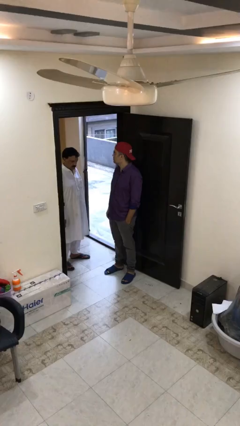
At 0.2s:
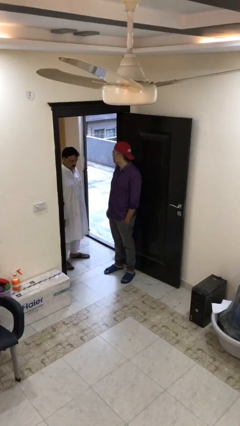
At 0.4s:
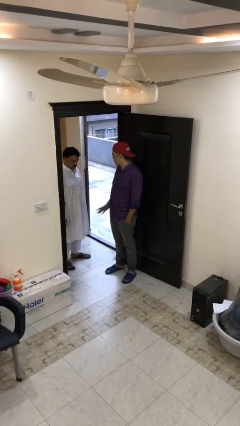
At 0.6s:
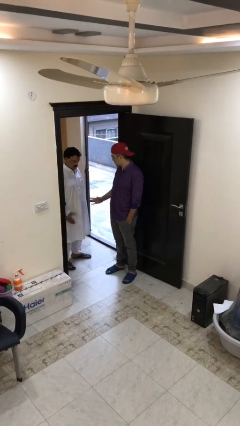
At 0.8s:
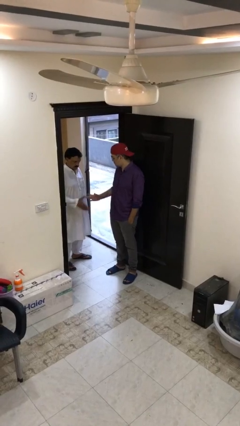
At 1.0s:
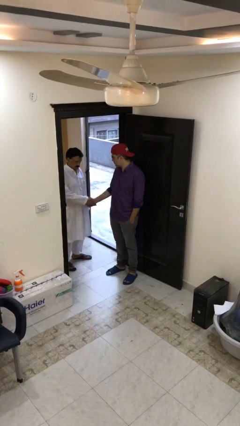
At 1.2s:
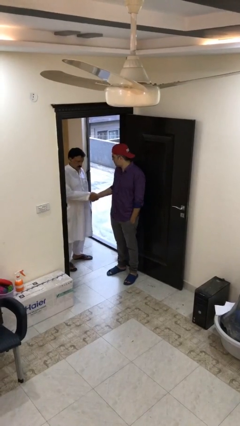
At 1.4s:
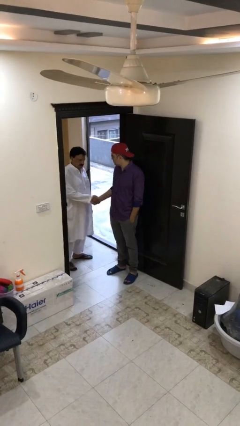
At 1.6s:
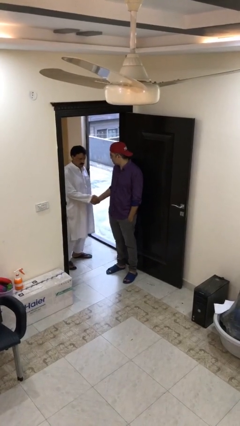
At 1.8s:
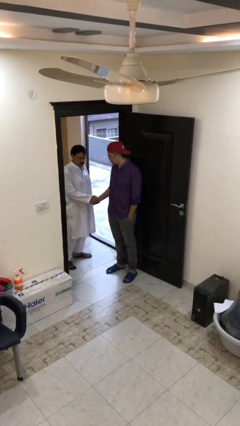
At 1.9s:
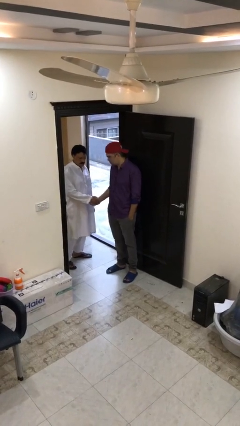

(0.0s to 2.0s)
person shakes hand

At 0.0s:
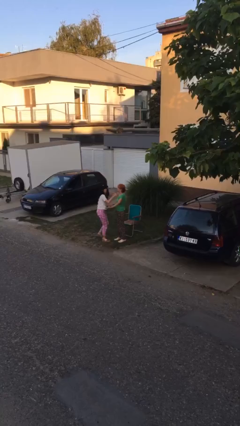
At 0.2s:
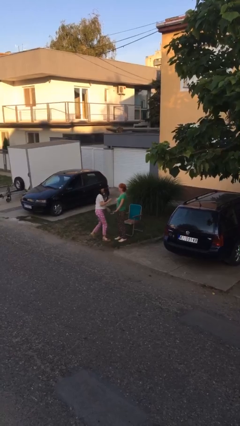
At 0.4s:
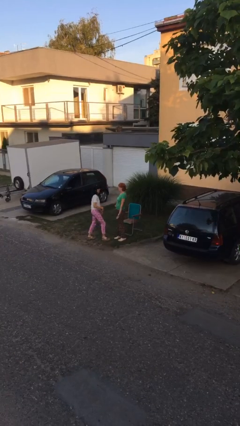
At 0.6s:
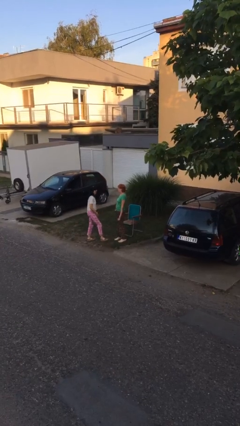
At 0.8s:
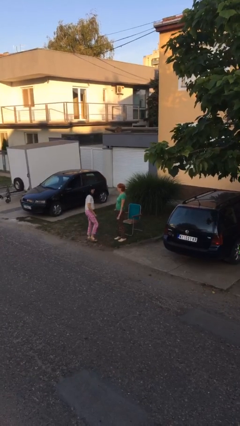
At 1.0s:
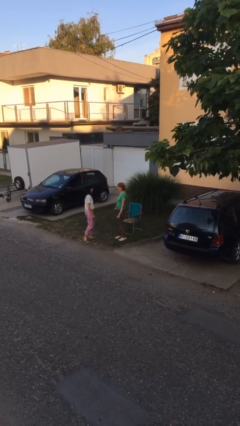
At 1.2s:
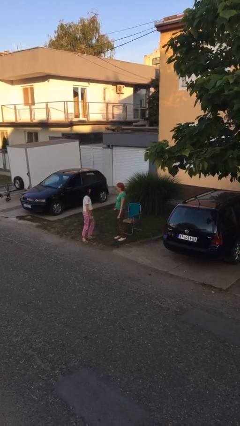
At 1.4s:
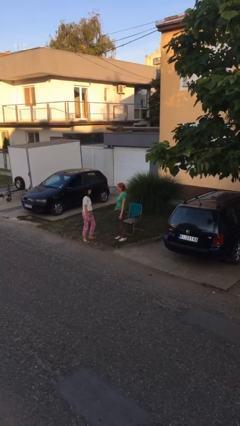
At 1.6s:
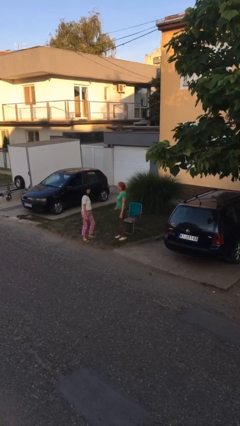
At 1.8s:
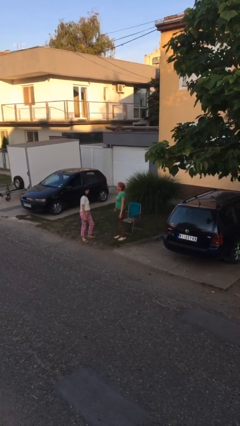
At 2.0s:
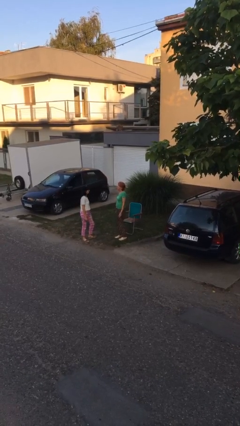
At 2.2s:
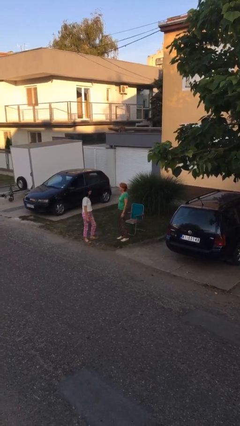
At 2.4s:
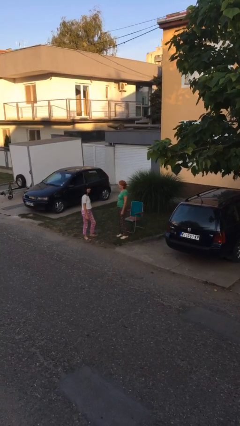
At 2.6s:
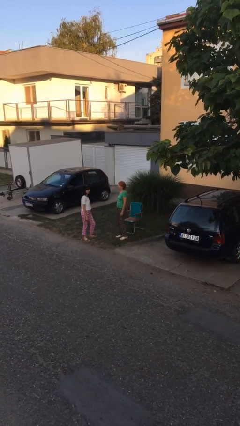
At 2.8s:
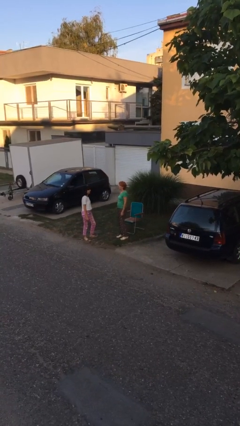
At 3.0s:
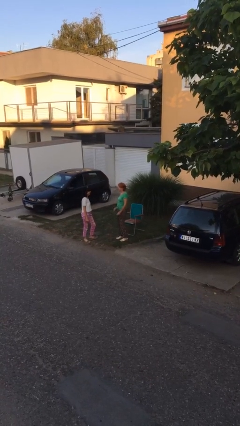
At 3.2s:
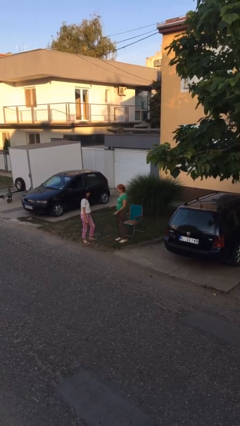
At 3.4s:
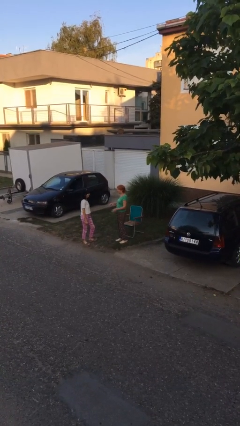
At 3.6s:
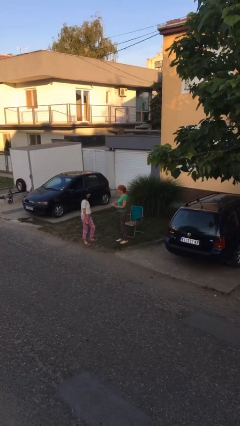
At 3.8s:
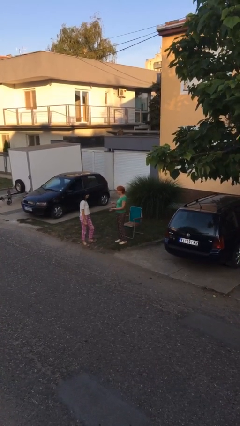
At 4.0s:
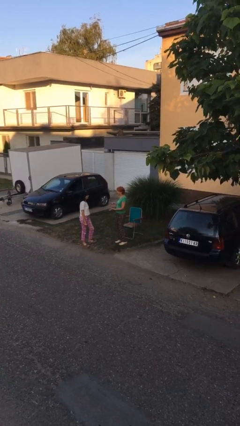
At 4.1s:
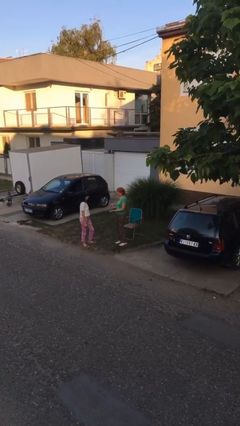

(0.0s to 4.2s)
person talks to person

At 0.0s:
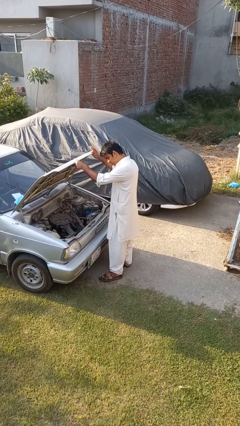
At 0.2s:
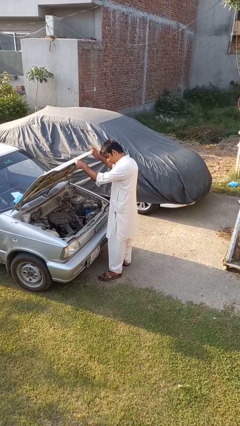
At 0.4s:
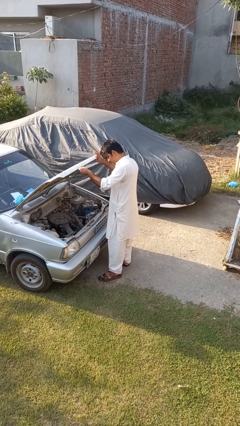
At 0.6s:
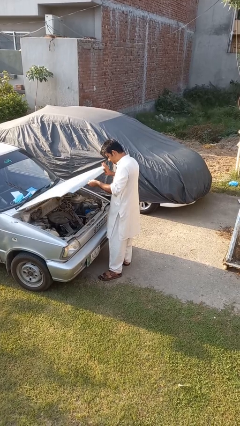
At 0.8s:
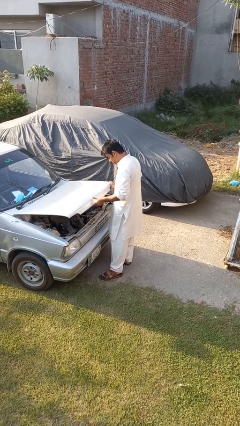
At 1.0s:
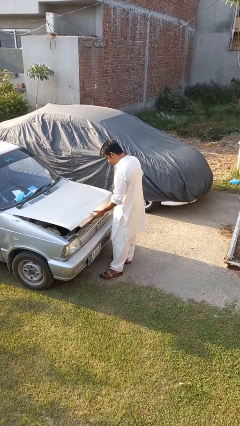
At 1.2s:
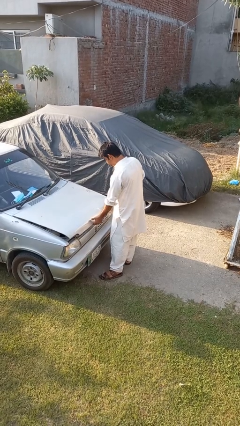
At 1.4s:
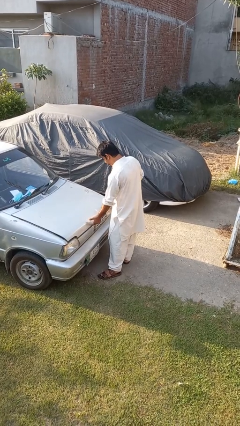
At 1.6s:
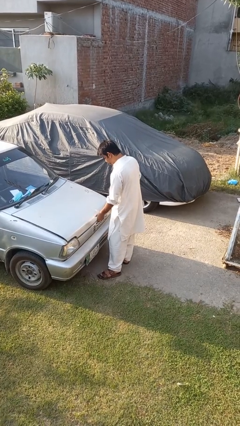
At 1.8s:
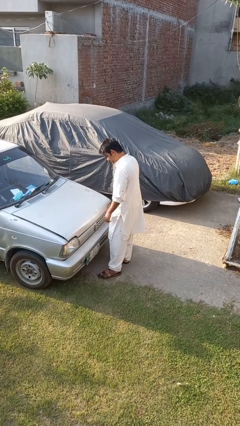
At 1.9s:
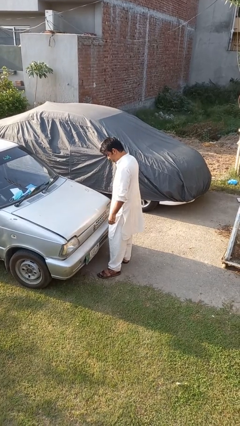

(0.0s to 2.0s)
person closes car hood

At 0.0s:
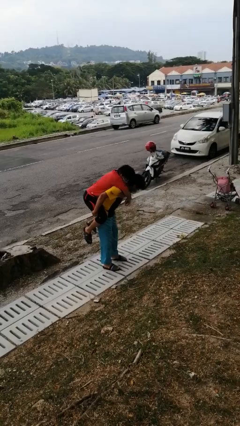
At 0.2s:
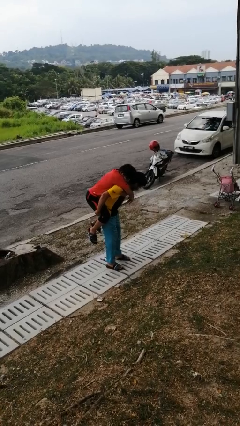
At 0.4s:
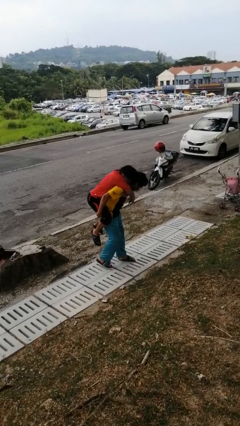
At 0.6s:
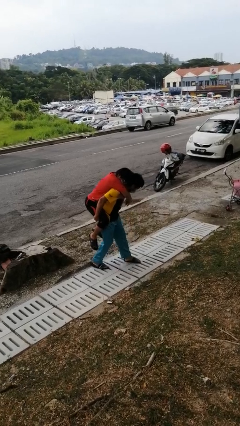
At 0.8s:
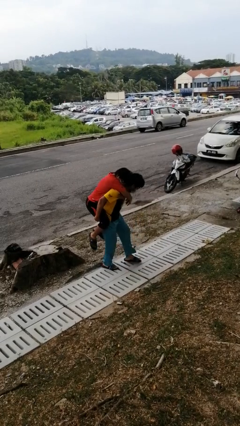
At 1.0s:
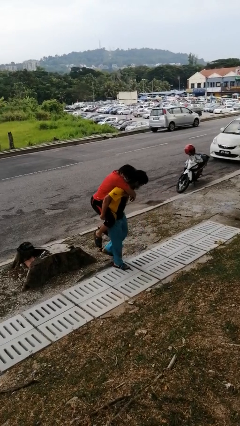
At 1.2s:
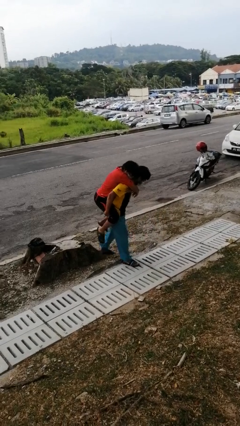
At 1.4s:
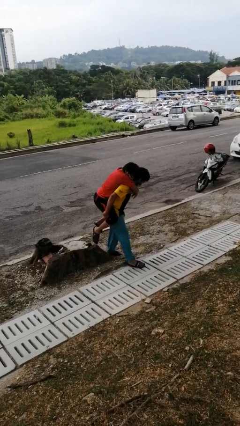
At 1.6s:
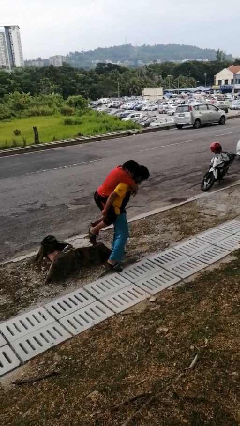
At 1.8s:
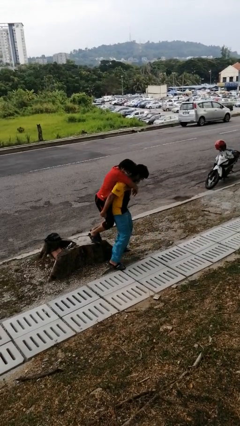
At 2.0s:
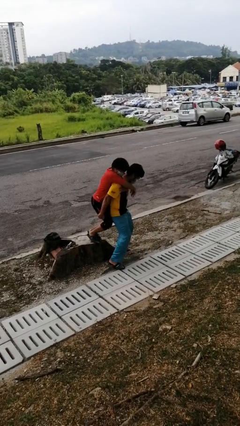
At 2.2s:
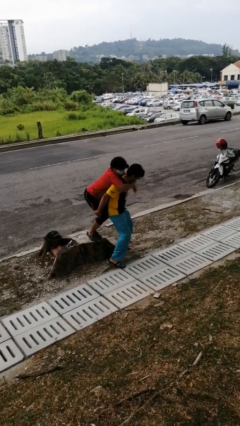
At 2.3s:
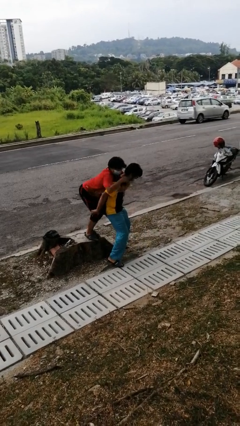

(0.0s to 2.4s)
person puts down person

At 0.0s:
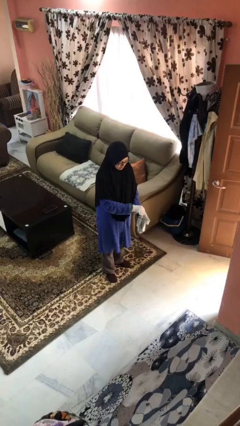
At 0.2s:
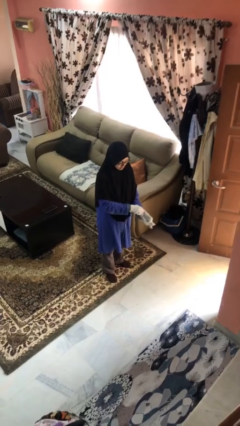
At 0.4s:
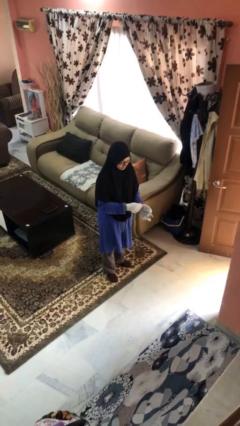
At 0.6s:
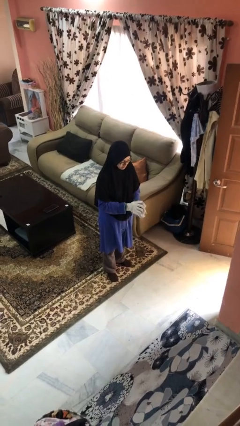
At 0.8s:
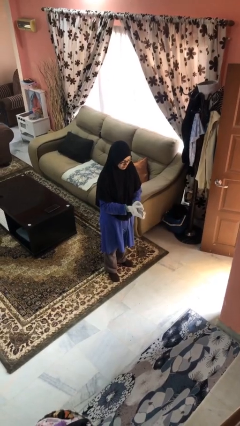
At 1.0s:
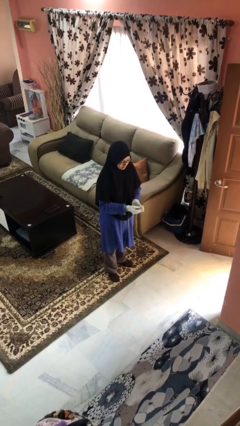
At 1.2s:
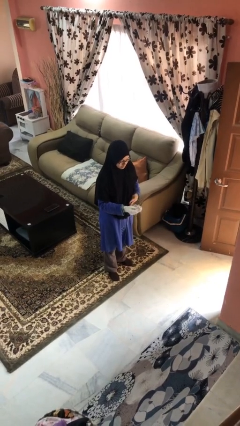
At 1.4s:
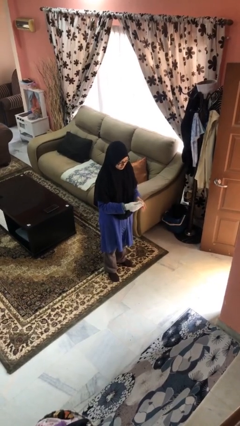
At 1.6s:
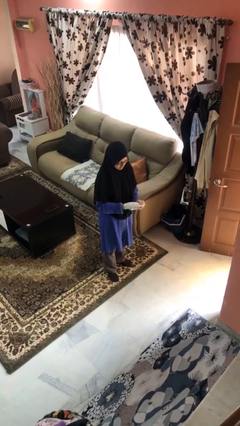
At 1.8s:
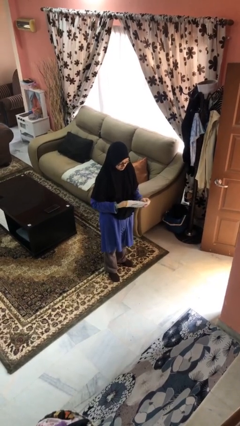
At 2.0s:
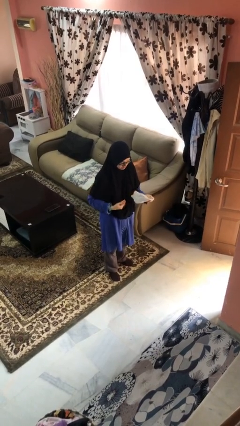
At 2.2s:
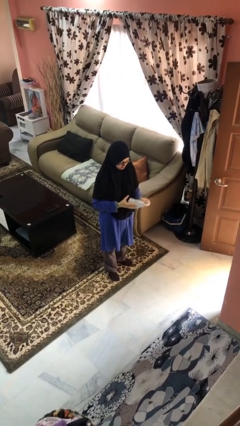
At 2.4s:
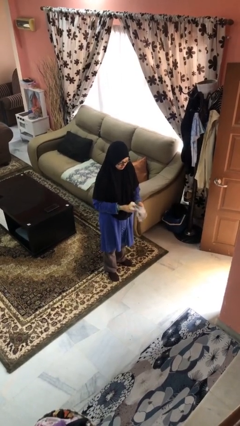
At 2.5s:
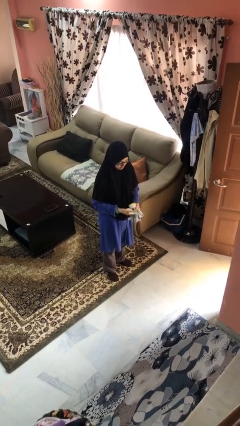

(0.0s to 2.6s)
person takes off gloves

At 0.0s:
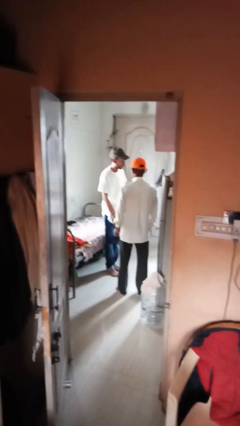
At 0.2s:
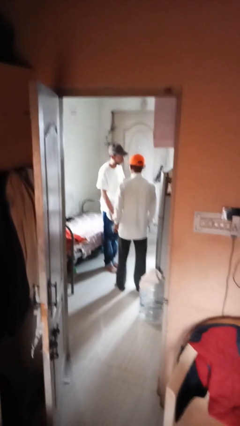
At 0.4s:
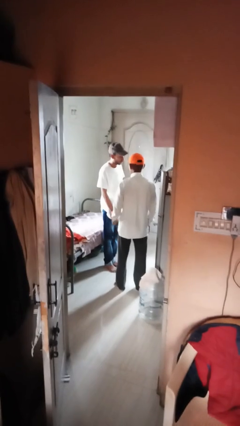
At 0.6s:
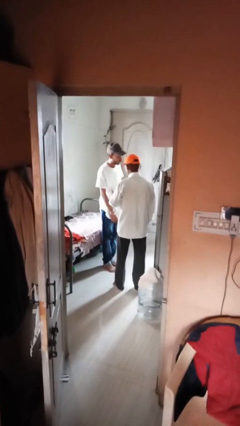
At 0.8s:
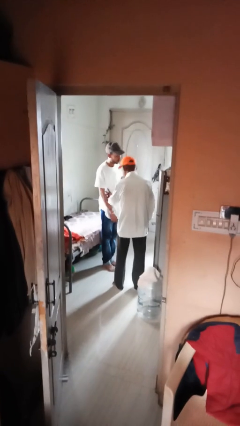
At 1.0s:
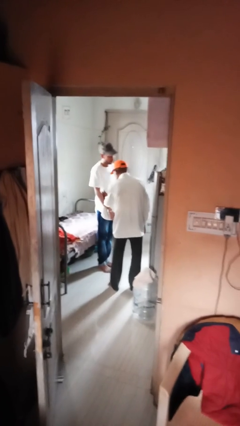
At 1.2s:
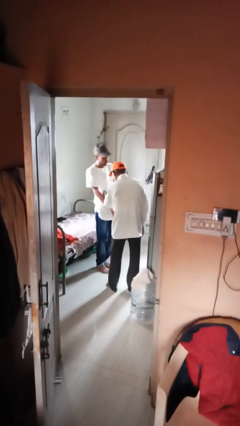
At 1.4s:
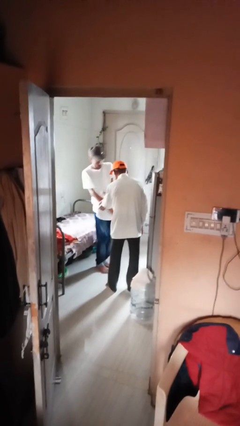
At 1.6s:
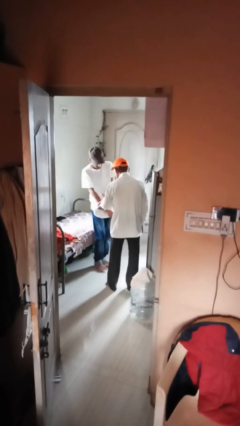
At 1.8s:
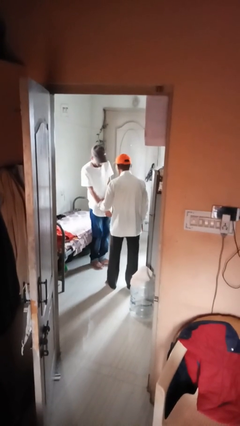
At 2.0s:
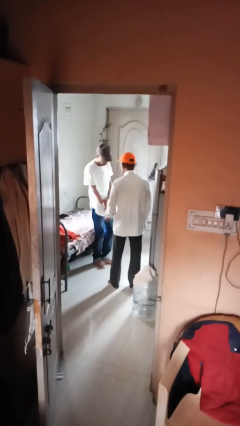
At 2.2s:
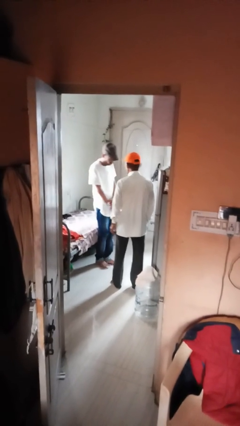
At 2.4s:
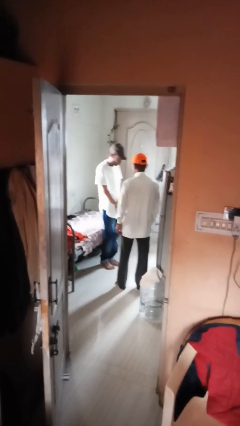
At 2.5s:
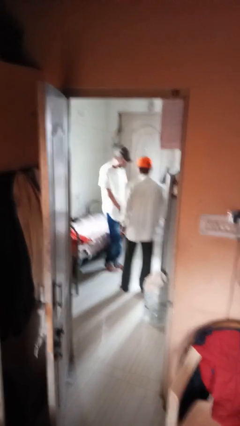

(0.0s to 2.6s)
person tickles person

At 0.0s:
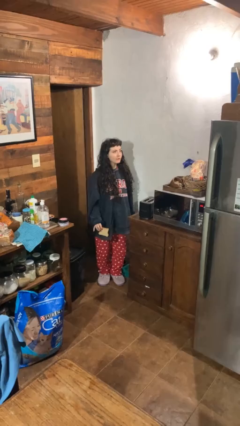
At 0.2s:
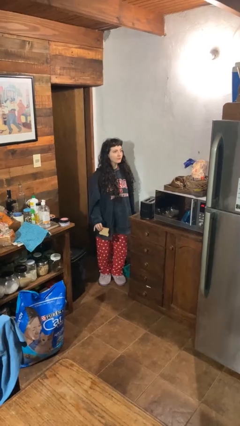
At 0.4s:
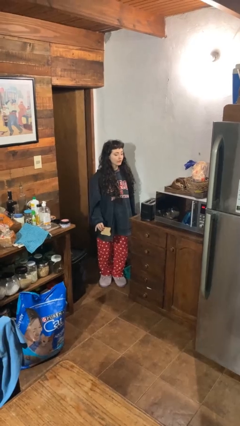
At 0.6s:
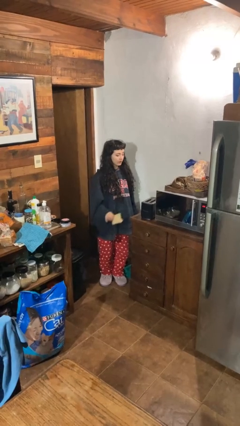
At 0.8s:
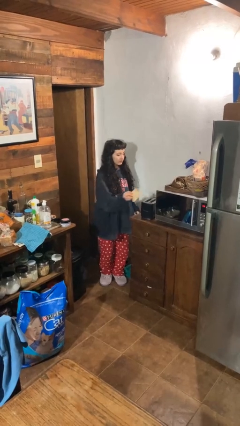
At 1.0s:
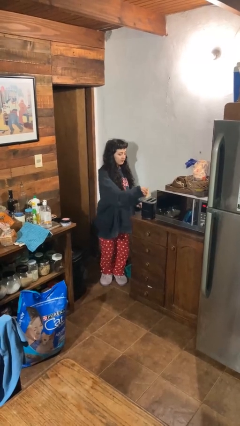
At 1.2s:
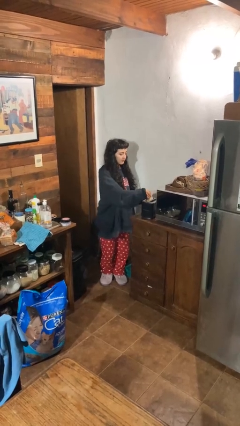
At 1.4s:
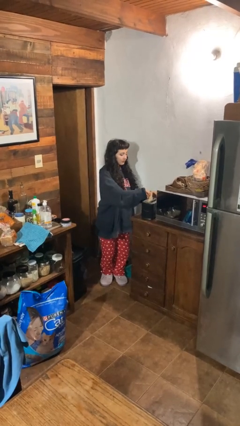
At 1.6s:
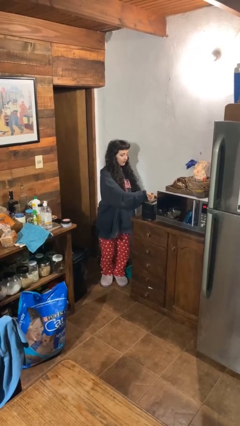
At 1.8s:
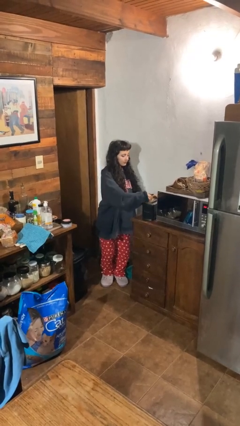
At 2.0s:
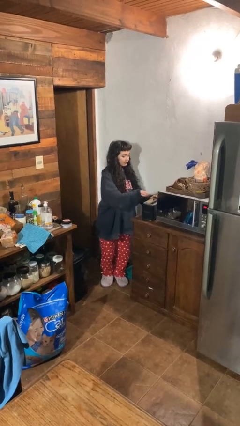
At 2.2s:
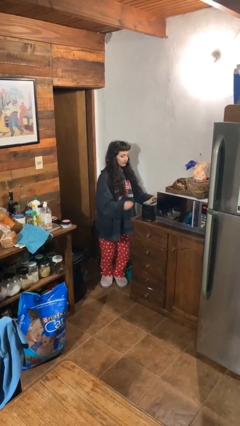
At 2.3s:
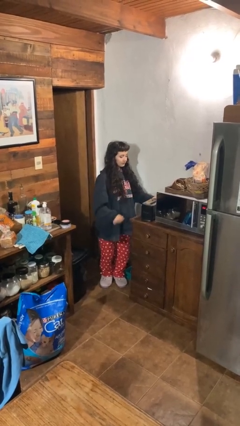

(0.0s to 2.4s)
person puts object into toaster
